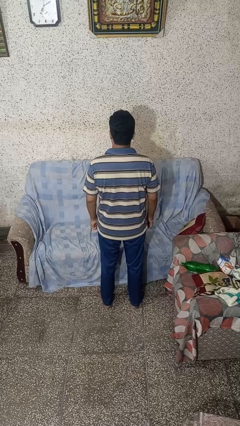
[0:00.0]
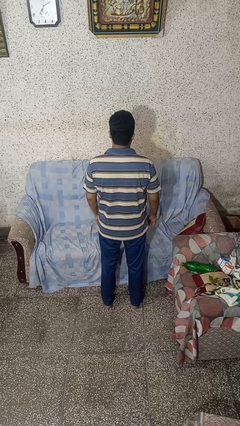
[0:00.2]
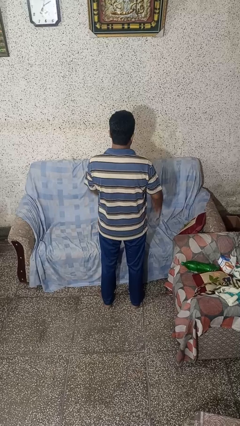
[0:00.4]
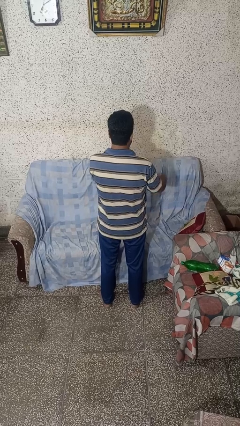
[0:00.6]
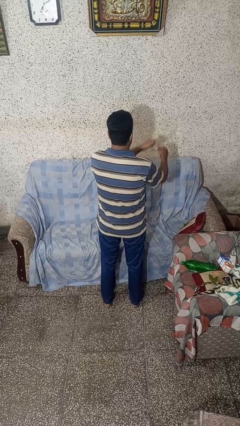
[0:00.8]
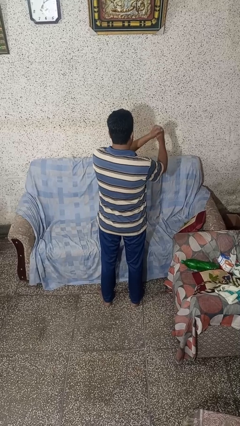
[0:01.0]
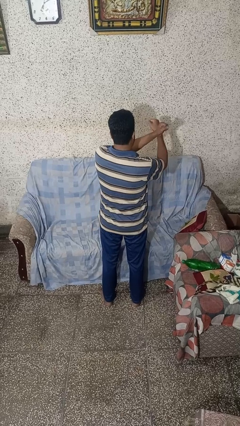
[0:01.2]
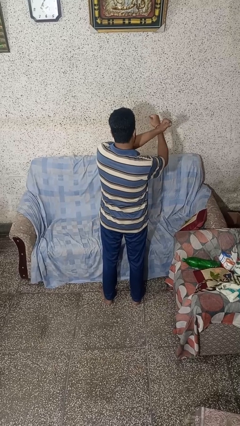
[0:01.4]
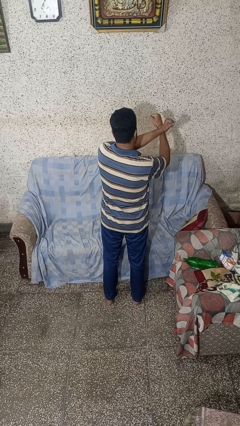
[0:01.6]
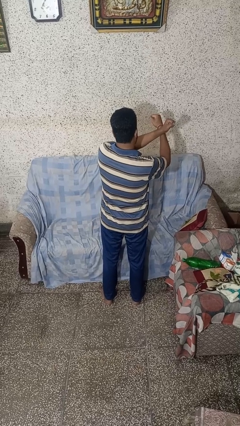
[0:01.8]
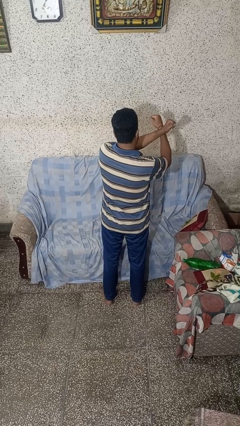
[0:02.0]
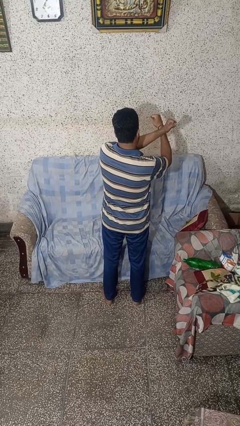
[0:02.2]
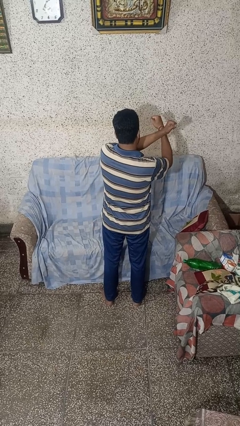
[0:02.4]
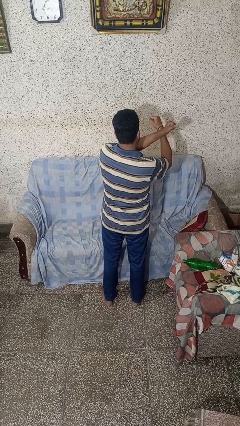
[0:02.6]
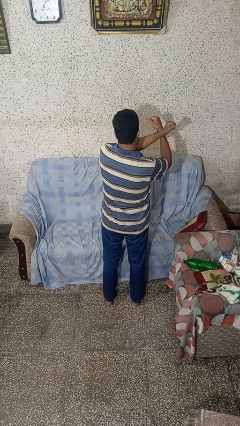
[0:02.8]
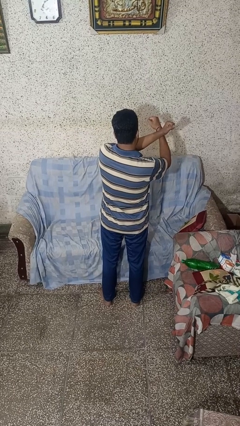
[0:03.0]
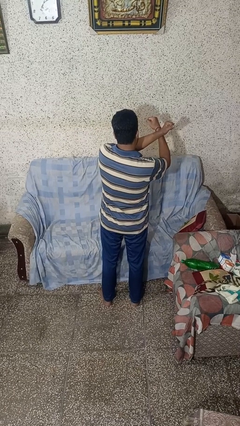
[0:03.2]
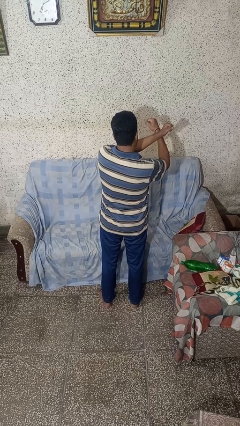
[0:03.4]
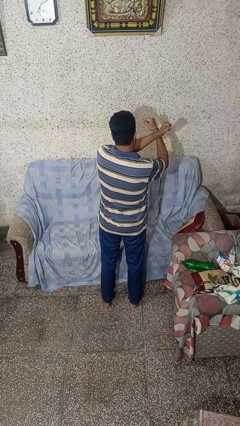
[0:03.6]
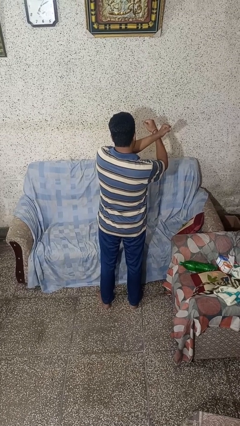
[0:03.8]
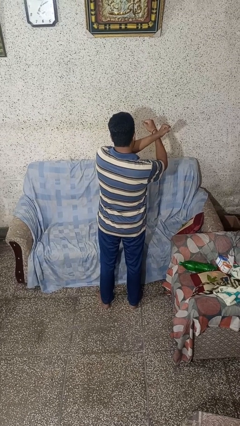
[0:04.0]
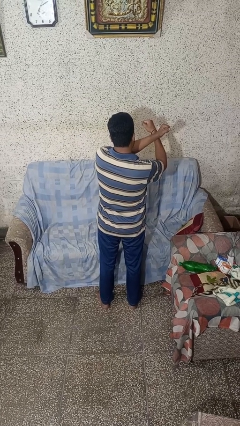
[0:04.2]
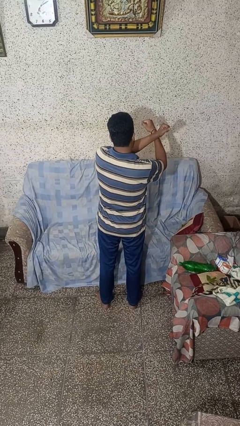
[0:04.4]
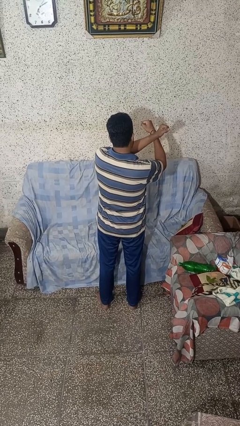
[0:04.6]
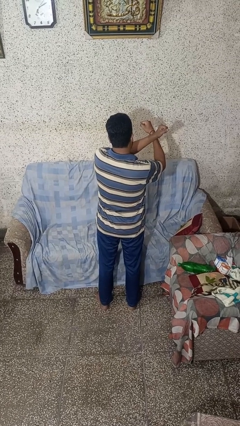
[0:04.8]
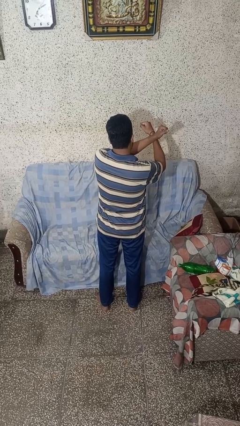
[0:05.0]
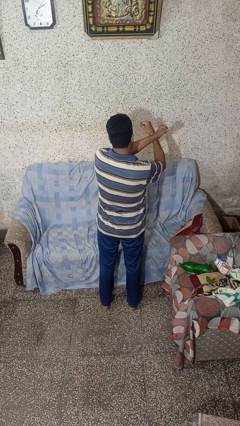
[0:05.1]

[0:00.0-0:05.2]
person gestures arms x

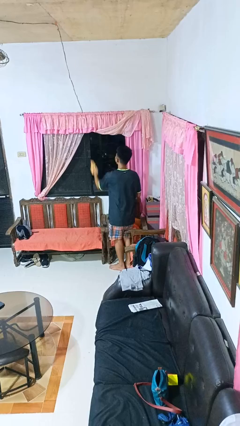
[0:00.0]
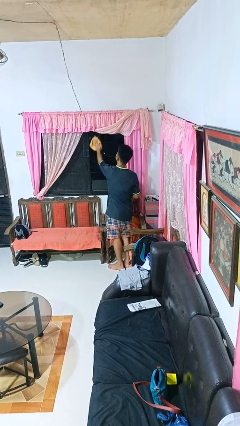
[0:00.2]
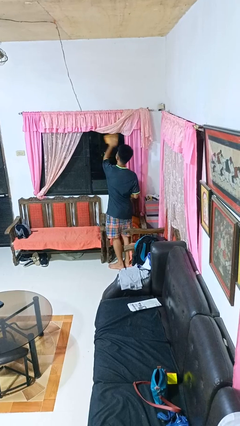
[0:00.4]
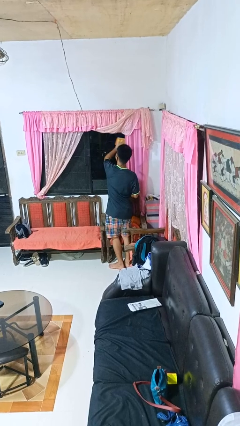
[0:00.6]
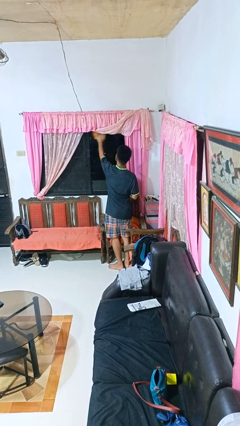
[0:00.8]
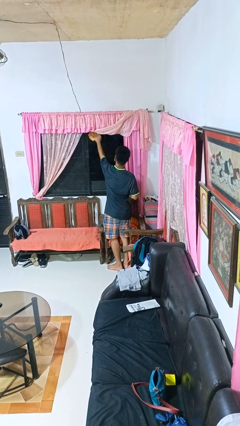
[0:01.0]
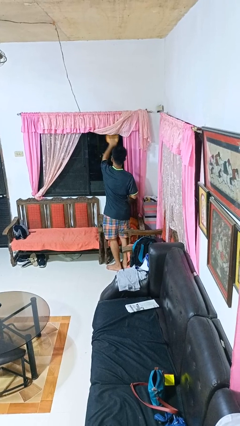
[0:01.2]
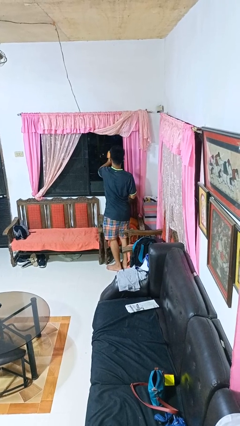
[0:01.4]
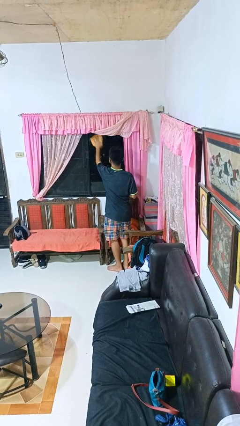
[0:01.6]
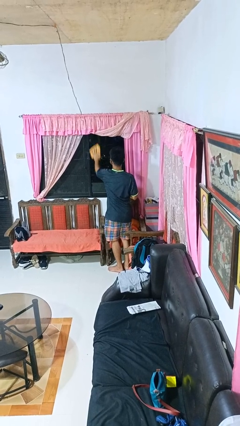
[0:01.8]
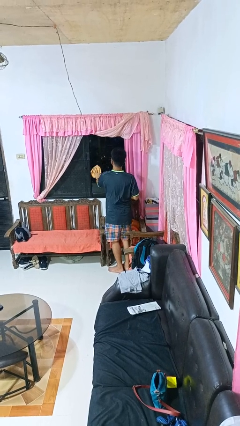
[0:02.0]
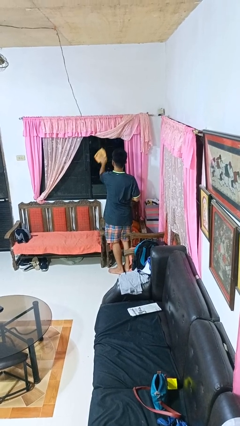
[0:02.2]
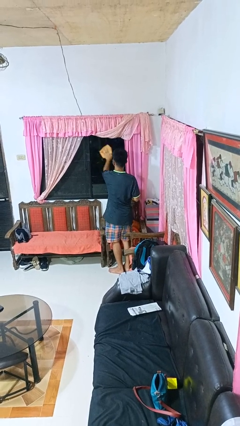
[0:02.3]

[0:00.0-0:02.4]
person washes window

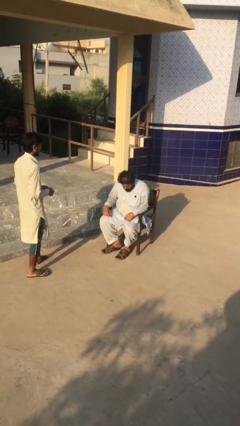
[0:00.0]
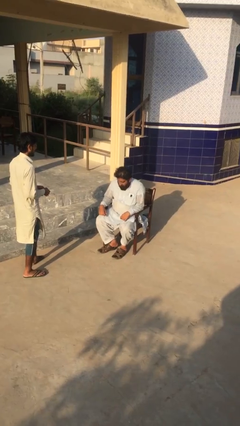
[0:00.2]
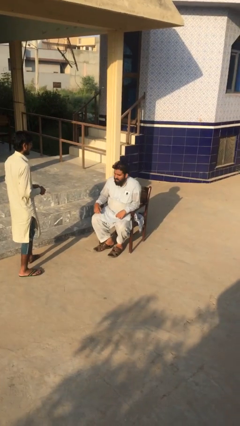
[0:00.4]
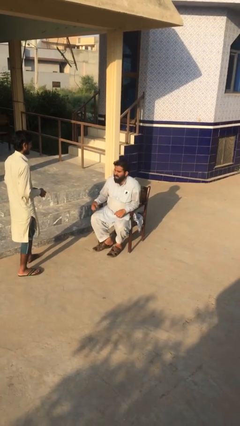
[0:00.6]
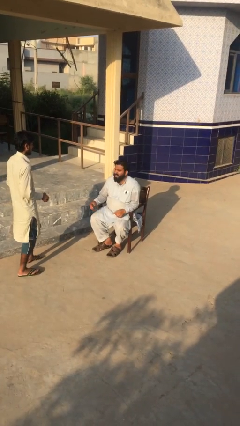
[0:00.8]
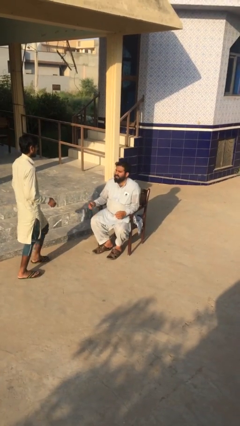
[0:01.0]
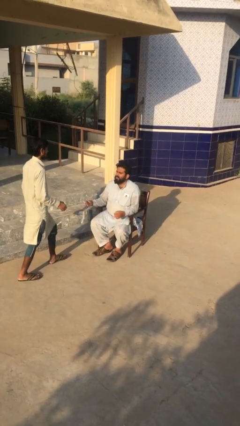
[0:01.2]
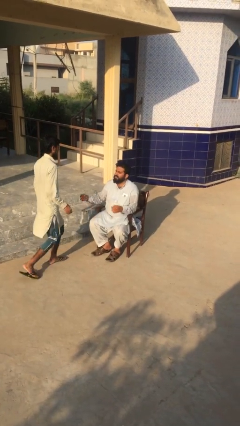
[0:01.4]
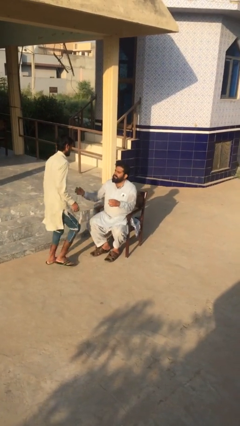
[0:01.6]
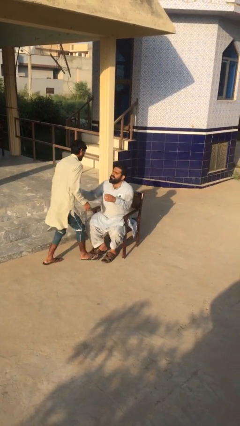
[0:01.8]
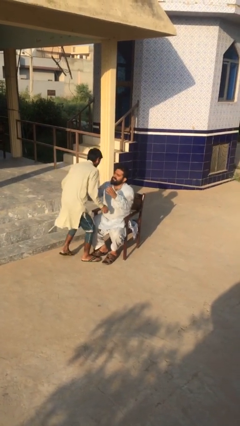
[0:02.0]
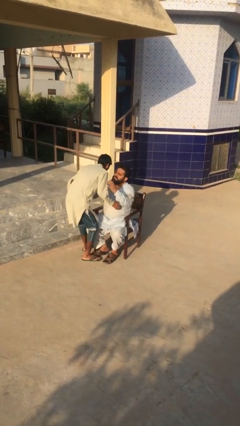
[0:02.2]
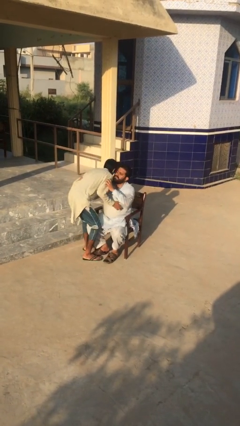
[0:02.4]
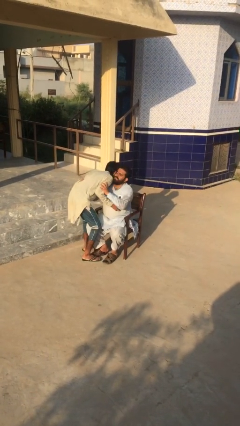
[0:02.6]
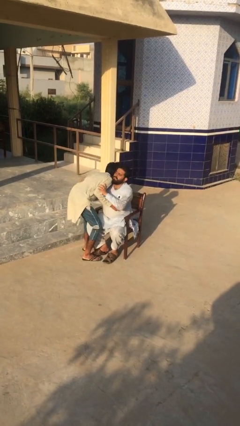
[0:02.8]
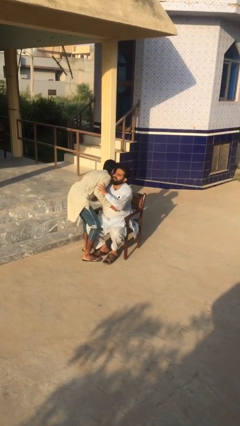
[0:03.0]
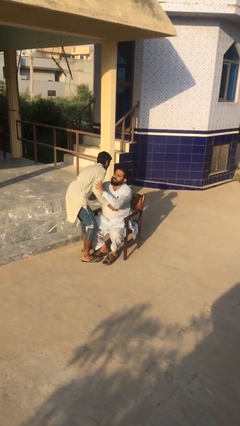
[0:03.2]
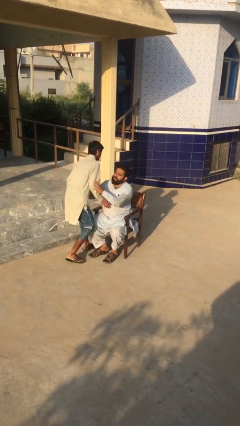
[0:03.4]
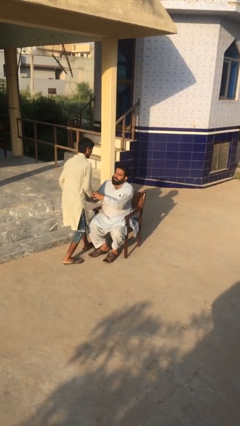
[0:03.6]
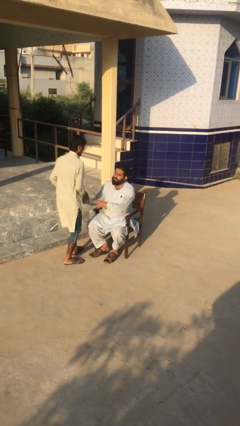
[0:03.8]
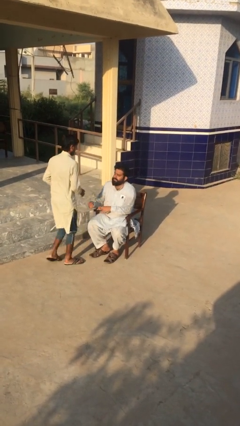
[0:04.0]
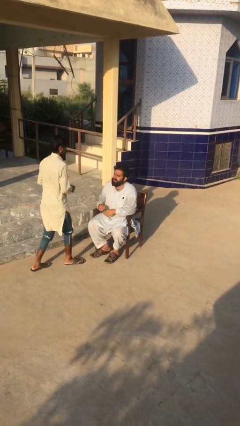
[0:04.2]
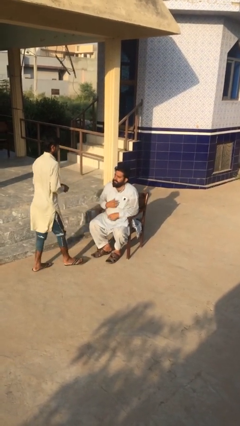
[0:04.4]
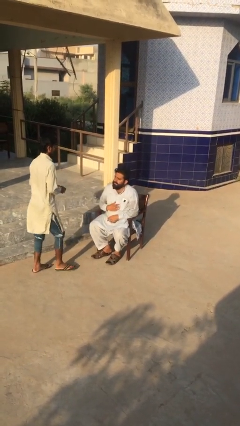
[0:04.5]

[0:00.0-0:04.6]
person embraces person

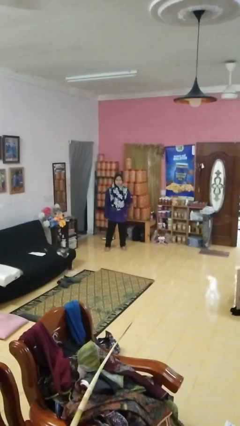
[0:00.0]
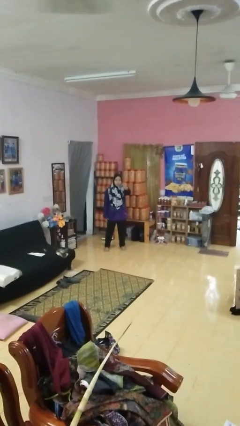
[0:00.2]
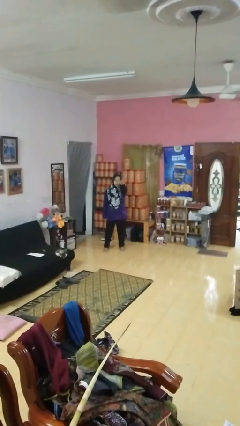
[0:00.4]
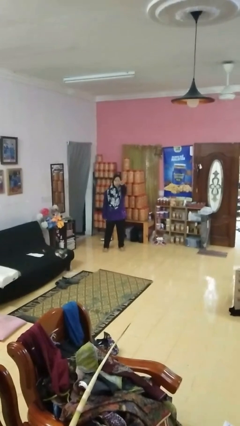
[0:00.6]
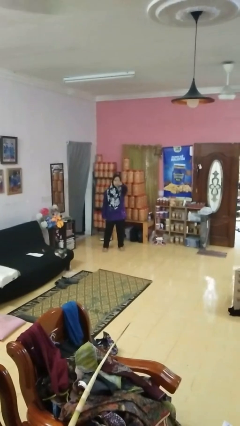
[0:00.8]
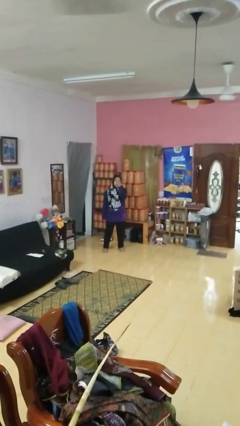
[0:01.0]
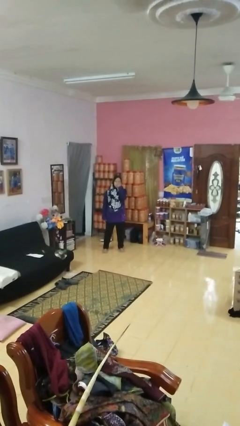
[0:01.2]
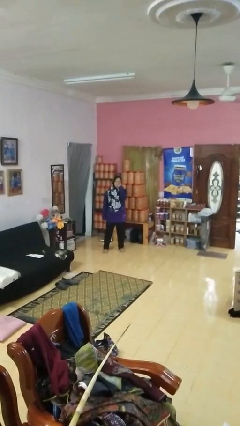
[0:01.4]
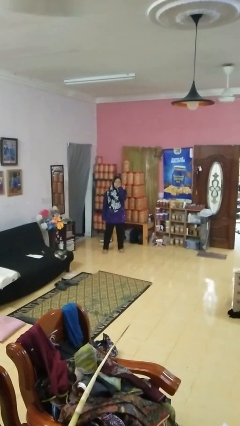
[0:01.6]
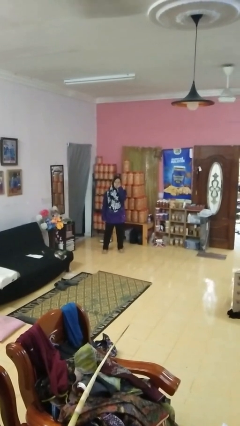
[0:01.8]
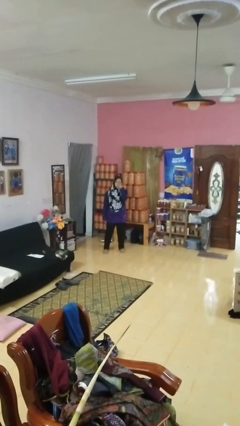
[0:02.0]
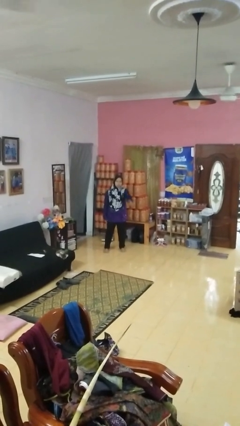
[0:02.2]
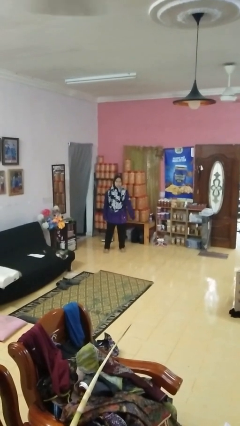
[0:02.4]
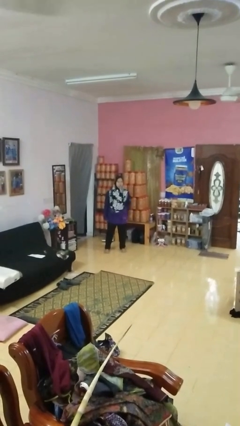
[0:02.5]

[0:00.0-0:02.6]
person gestures watch closely

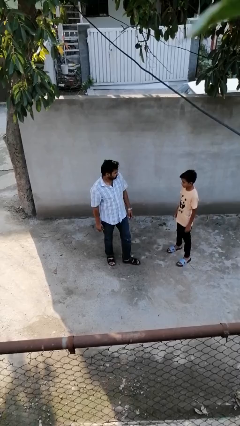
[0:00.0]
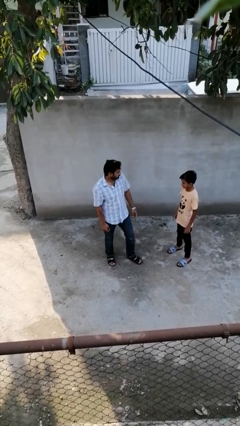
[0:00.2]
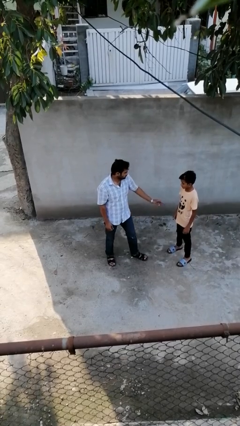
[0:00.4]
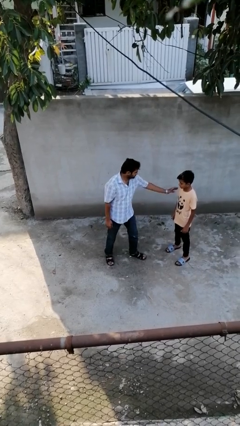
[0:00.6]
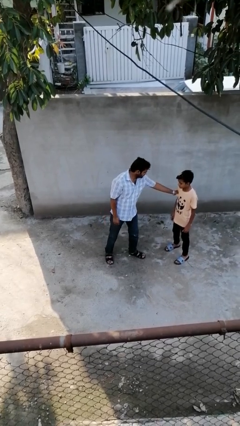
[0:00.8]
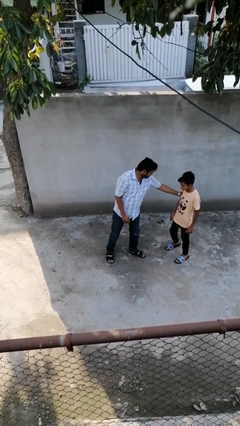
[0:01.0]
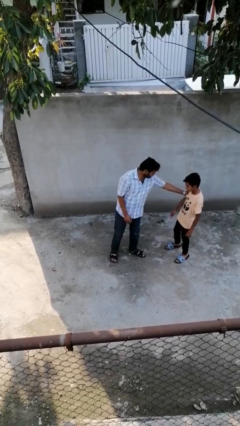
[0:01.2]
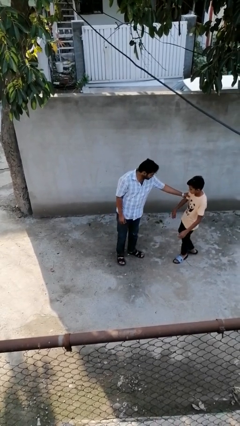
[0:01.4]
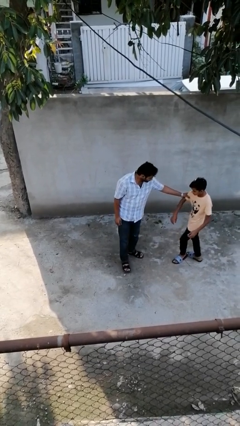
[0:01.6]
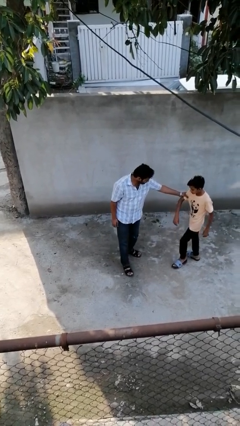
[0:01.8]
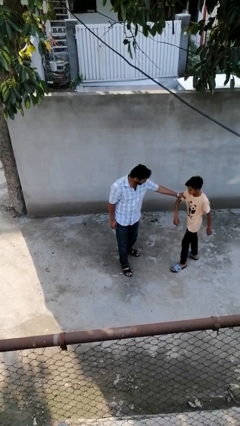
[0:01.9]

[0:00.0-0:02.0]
person grabs person by bicep

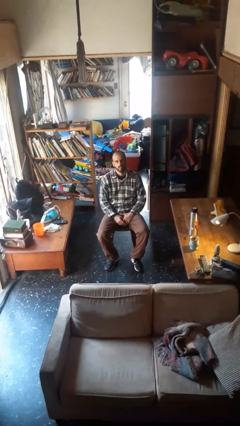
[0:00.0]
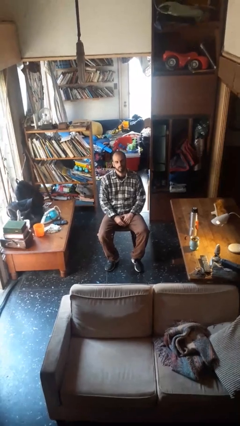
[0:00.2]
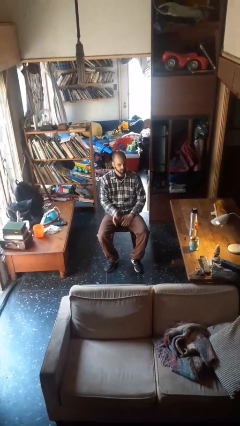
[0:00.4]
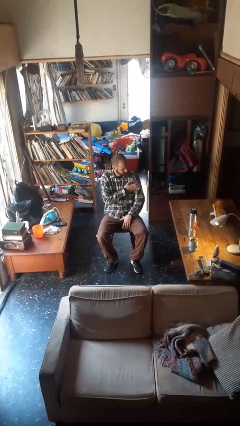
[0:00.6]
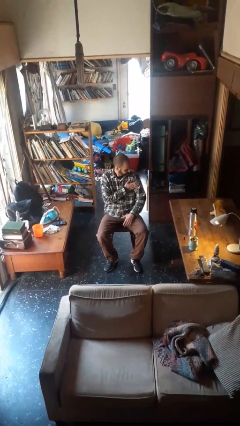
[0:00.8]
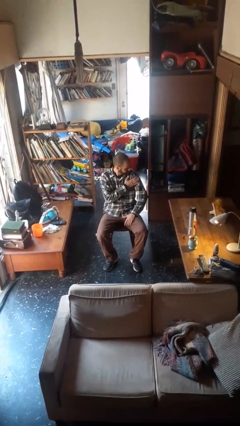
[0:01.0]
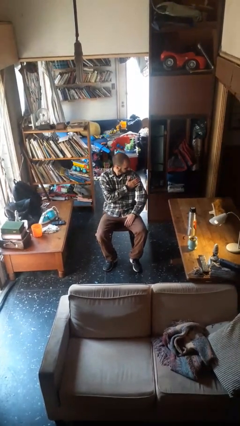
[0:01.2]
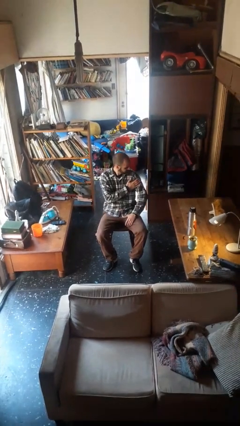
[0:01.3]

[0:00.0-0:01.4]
person swats bug
